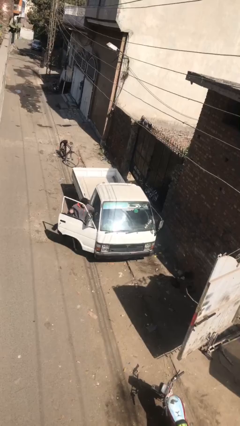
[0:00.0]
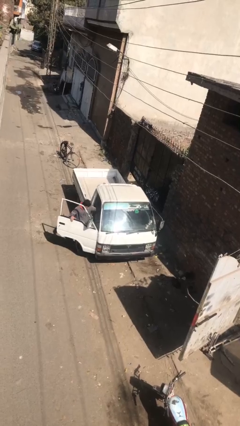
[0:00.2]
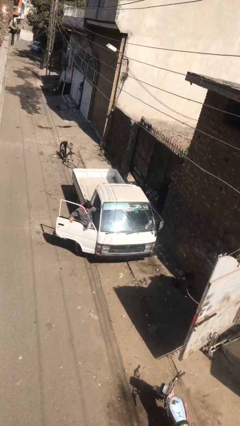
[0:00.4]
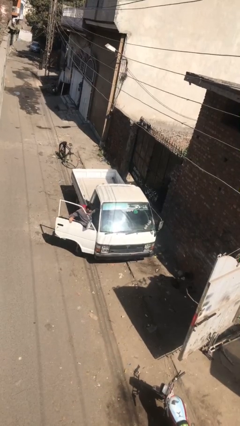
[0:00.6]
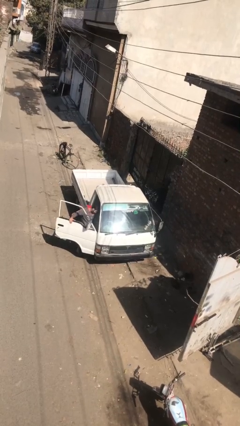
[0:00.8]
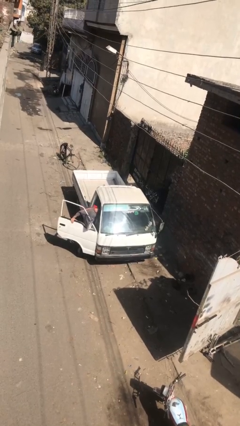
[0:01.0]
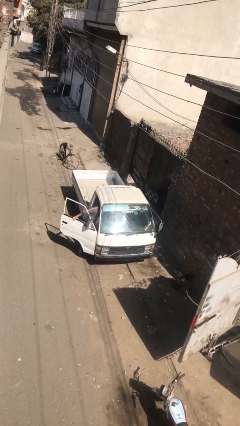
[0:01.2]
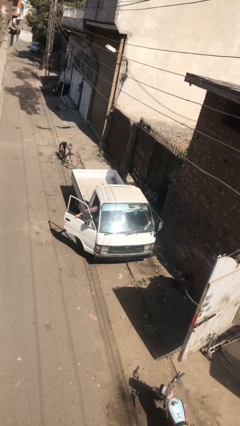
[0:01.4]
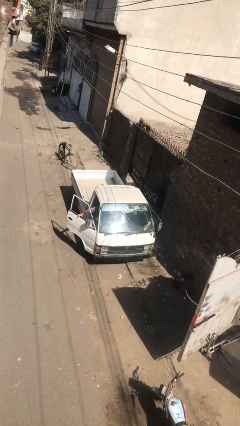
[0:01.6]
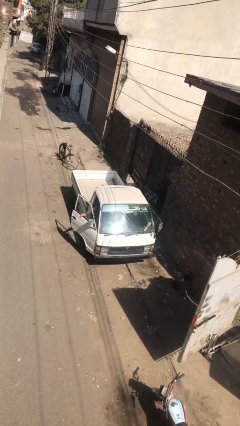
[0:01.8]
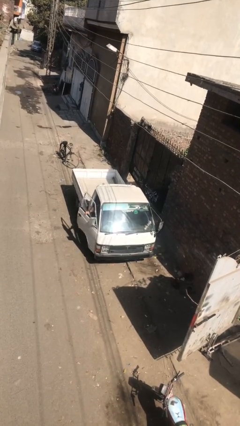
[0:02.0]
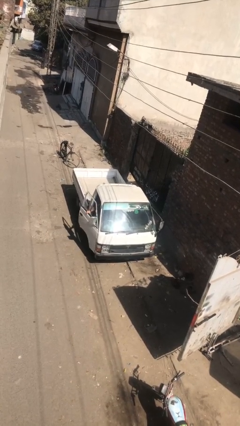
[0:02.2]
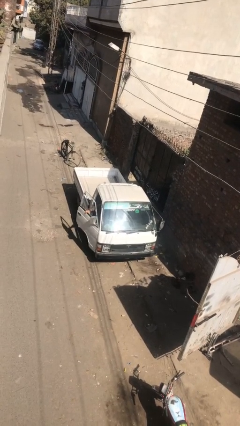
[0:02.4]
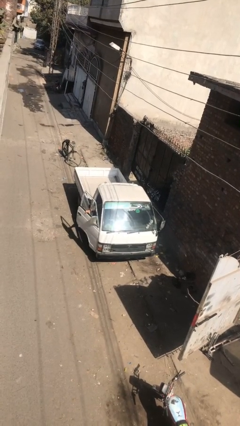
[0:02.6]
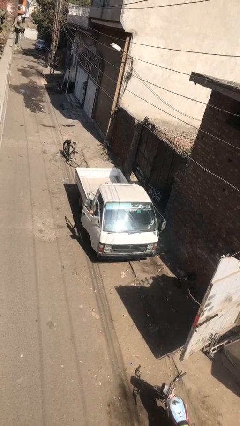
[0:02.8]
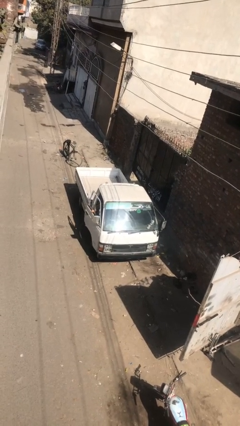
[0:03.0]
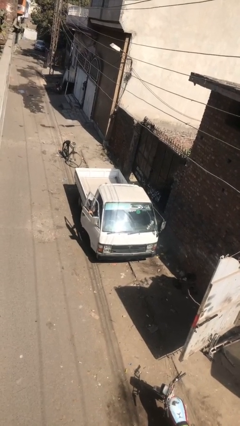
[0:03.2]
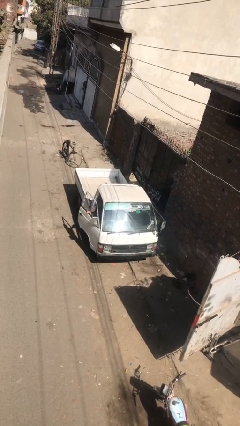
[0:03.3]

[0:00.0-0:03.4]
car picks up person

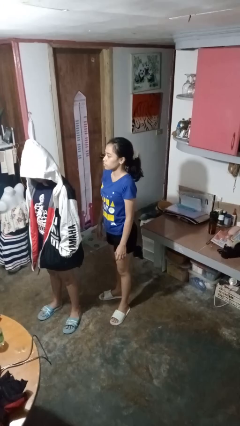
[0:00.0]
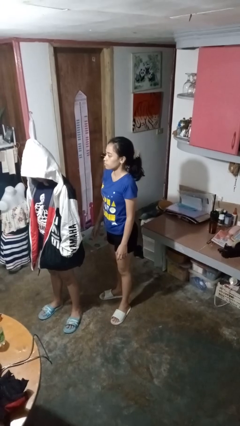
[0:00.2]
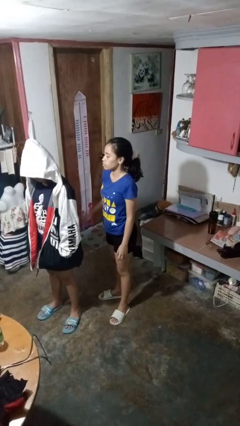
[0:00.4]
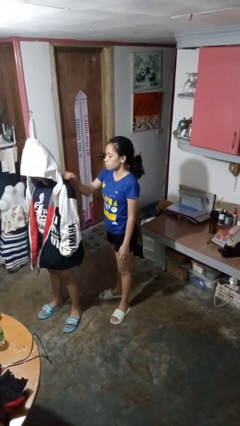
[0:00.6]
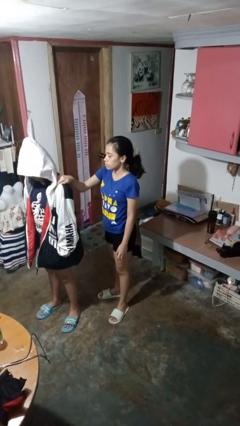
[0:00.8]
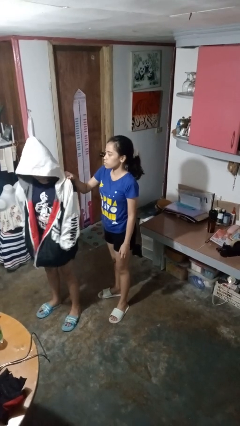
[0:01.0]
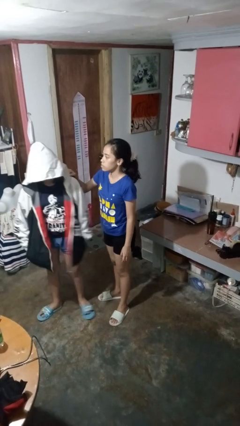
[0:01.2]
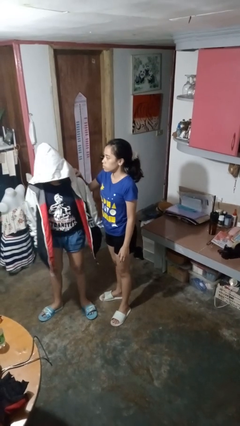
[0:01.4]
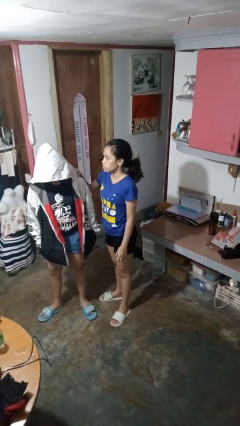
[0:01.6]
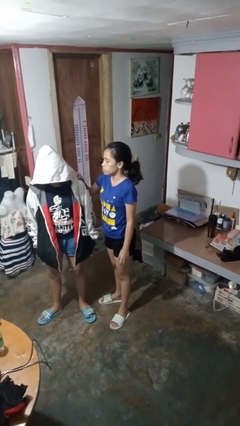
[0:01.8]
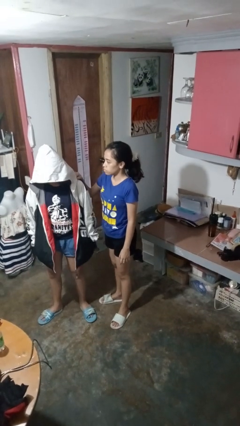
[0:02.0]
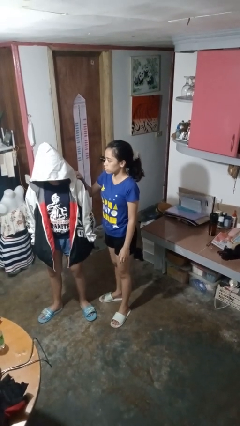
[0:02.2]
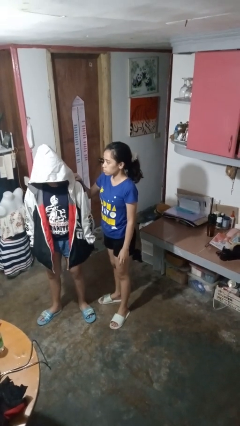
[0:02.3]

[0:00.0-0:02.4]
person grabs person by shoulder

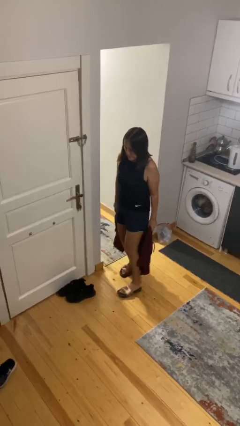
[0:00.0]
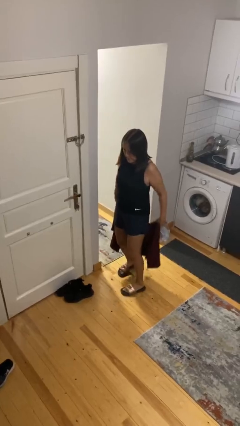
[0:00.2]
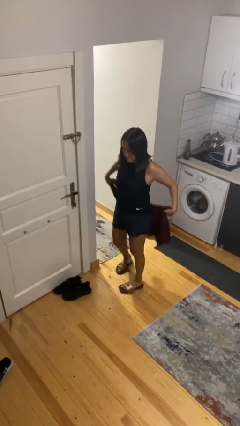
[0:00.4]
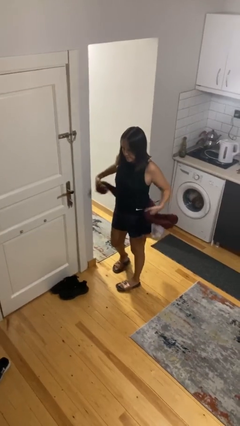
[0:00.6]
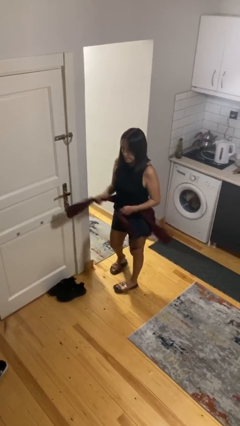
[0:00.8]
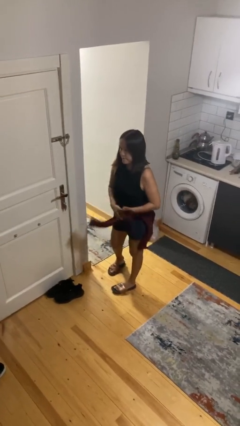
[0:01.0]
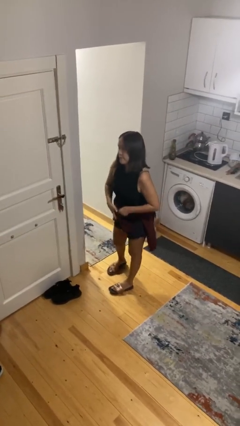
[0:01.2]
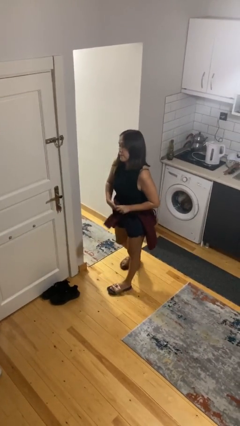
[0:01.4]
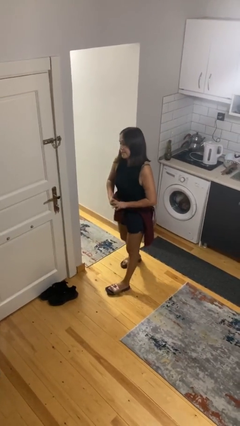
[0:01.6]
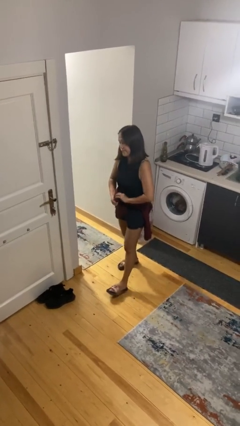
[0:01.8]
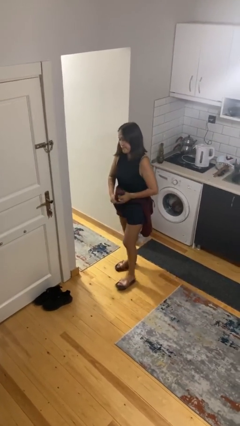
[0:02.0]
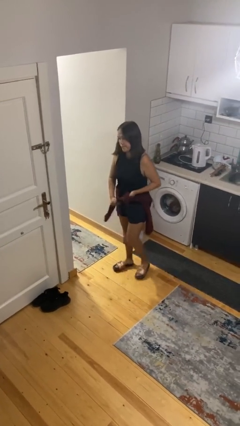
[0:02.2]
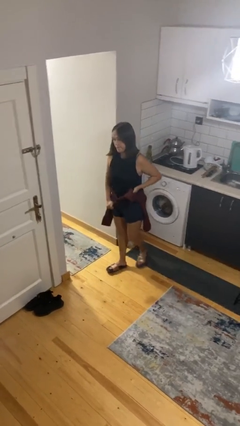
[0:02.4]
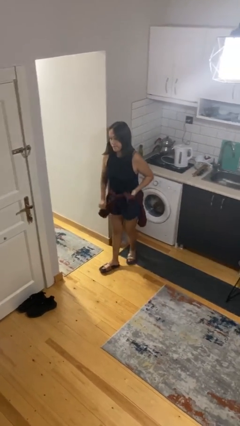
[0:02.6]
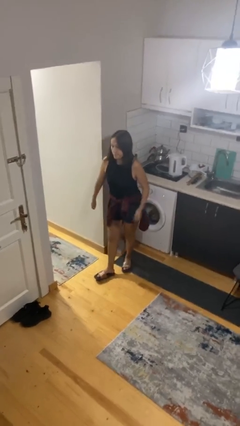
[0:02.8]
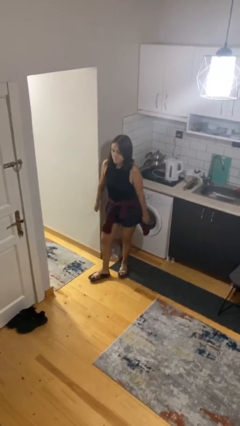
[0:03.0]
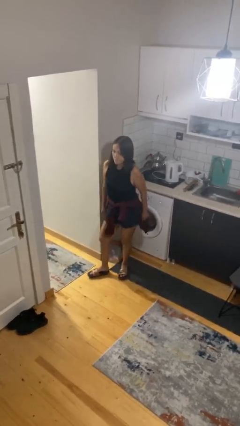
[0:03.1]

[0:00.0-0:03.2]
person ties jacket around waist

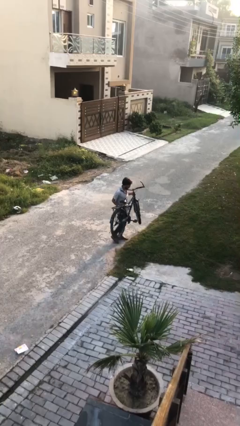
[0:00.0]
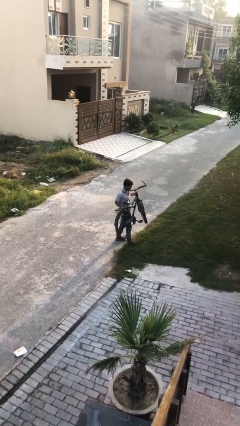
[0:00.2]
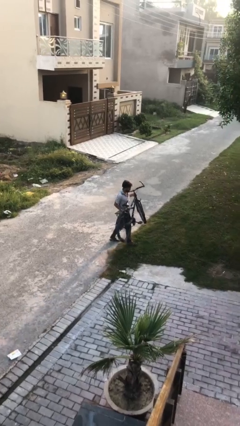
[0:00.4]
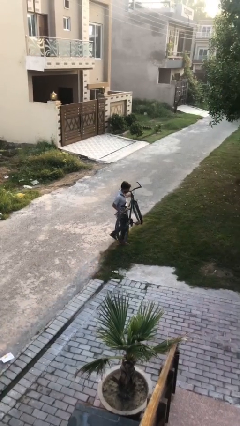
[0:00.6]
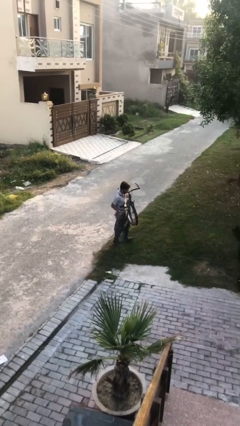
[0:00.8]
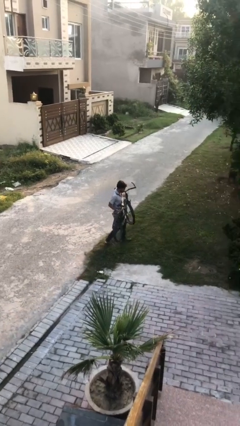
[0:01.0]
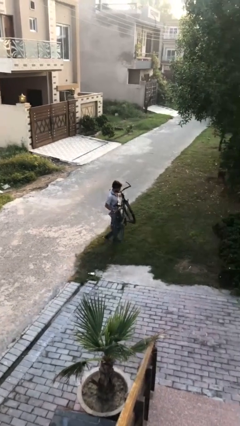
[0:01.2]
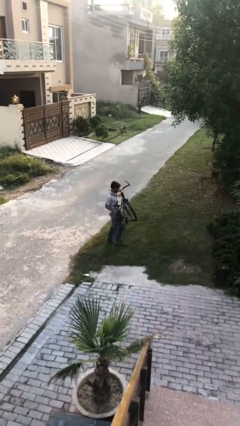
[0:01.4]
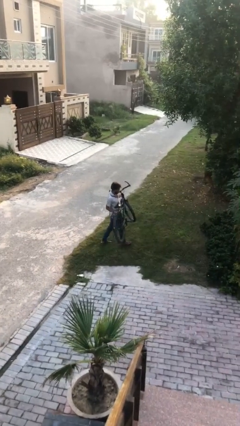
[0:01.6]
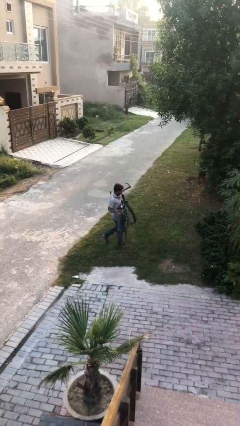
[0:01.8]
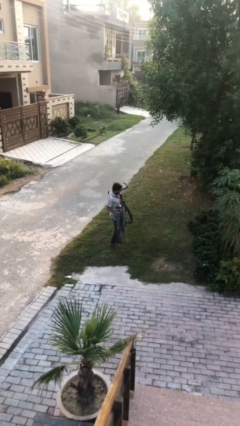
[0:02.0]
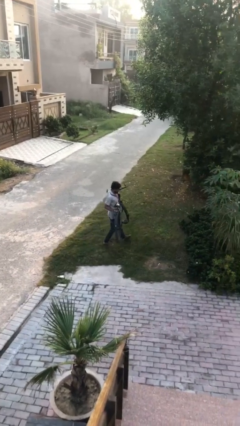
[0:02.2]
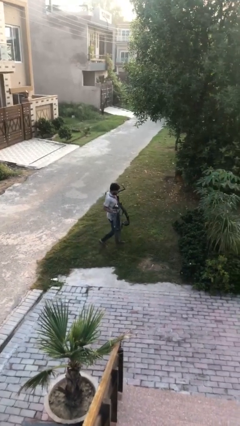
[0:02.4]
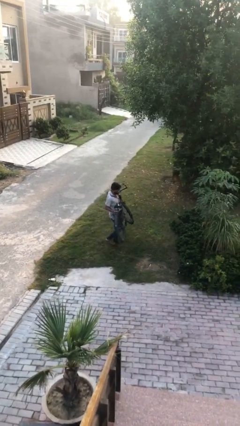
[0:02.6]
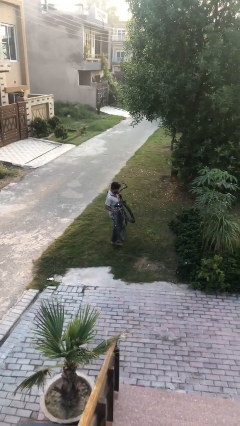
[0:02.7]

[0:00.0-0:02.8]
person carries heavy object

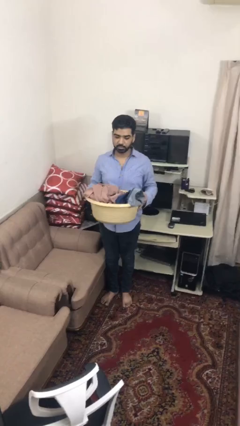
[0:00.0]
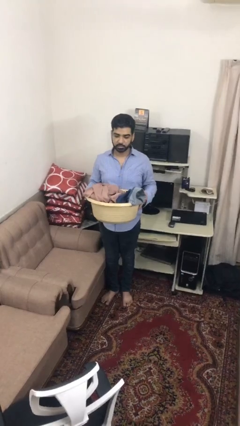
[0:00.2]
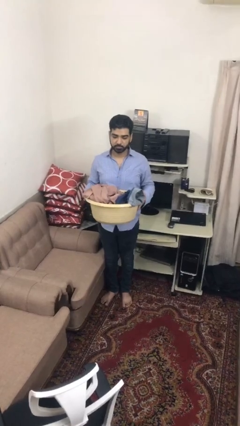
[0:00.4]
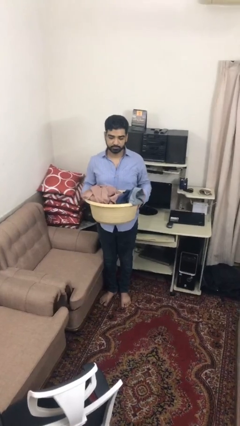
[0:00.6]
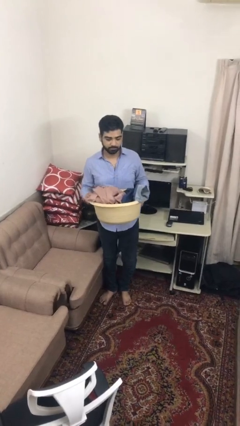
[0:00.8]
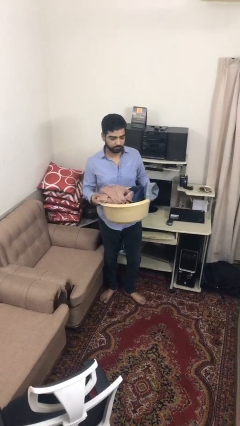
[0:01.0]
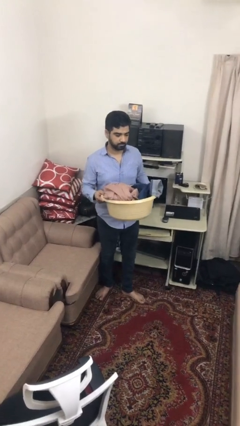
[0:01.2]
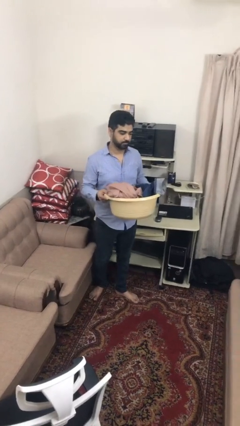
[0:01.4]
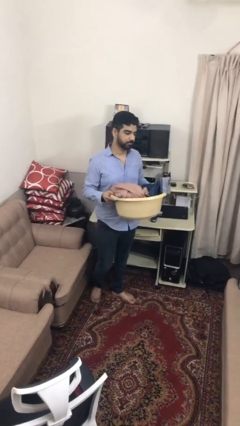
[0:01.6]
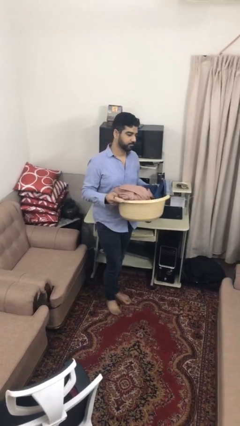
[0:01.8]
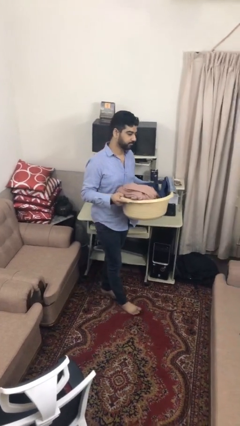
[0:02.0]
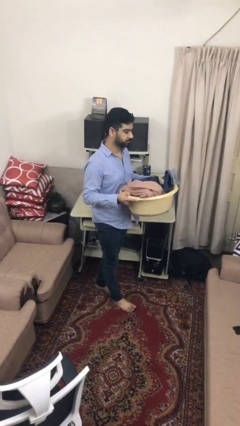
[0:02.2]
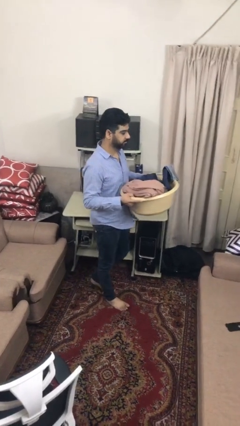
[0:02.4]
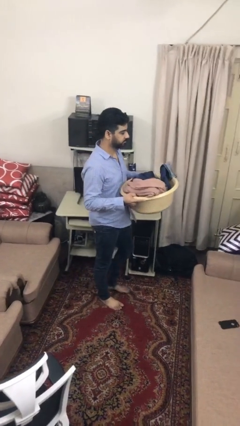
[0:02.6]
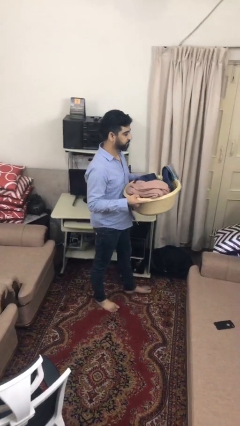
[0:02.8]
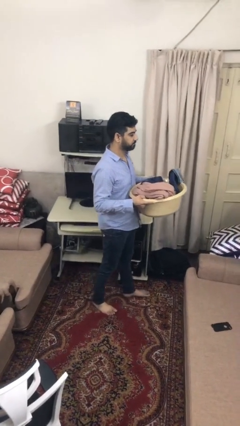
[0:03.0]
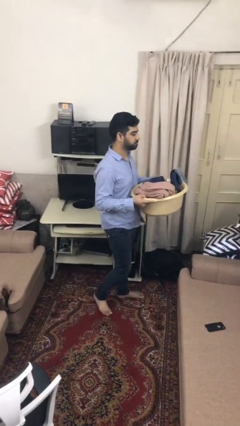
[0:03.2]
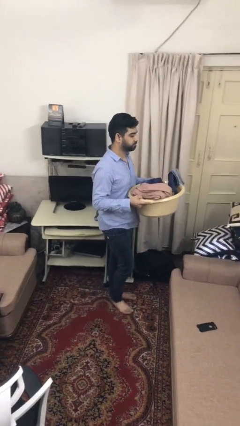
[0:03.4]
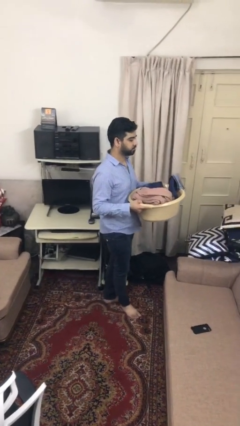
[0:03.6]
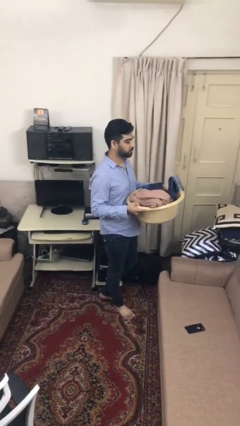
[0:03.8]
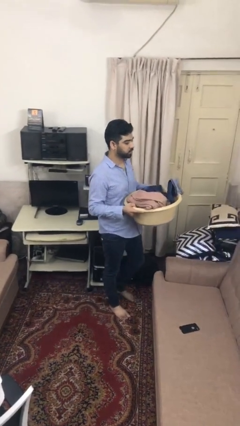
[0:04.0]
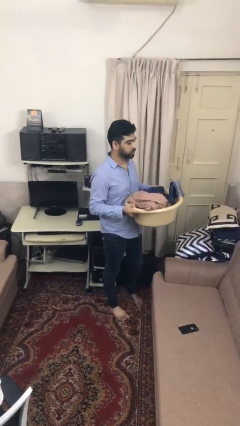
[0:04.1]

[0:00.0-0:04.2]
person carries laundry basket

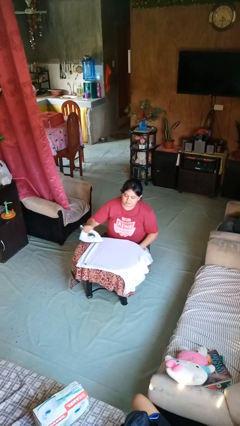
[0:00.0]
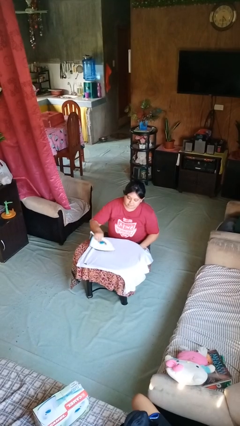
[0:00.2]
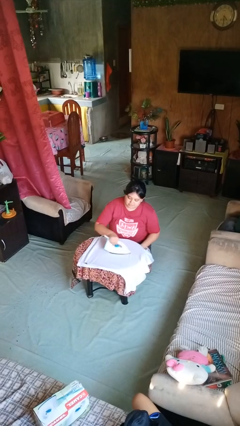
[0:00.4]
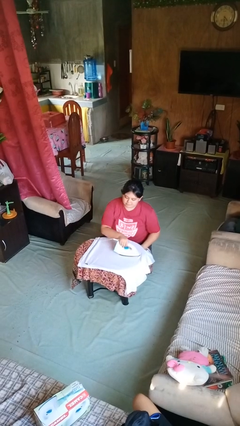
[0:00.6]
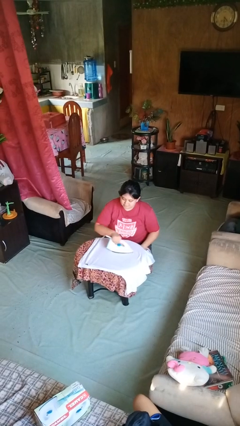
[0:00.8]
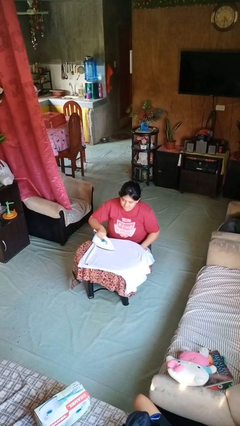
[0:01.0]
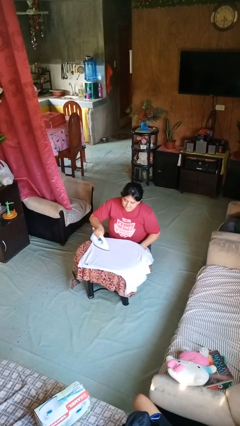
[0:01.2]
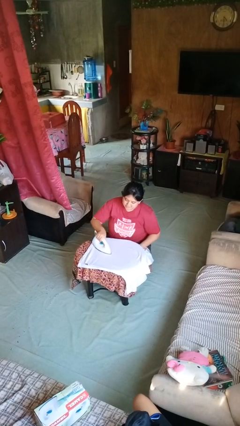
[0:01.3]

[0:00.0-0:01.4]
person irons clothes

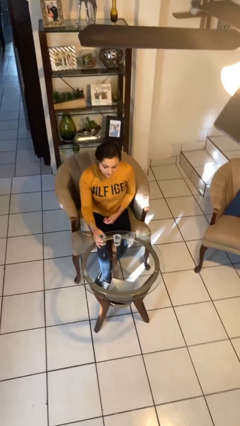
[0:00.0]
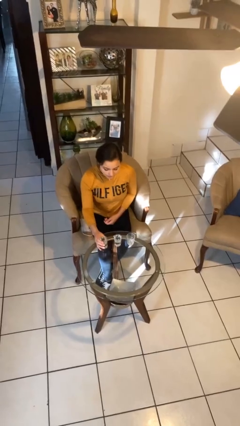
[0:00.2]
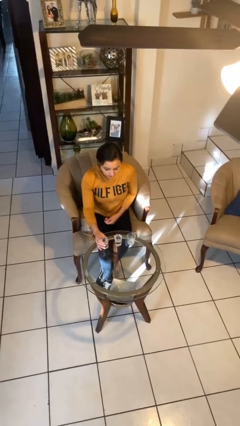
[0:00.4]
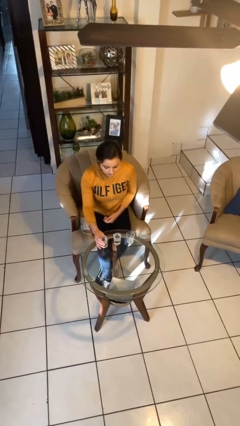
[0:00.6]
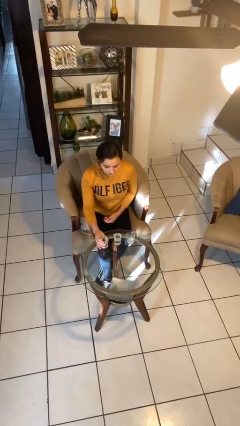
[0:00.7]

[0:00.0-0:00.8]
person puts down object on table
